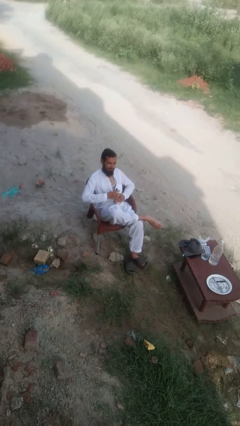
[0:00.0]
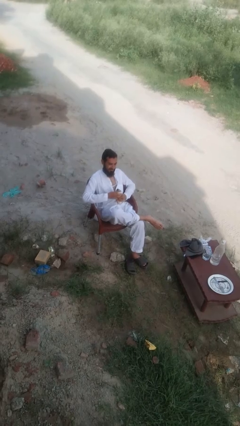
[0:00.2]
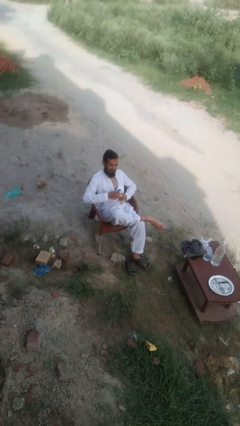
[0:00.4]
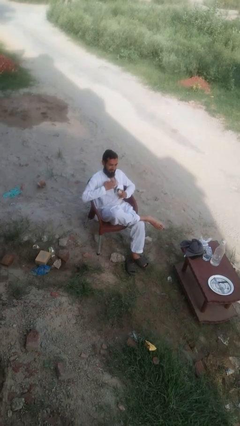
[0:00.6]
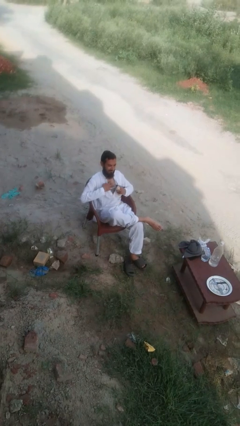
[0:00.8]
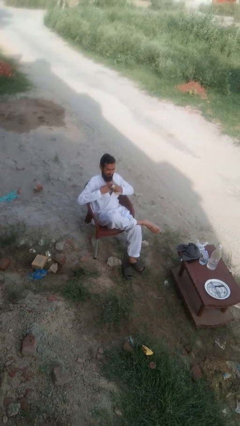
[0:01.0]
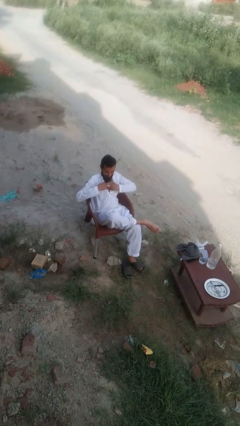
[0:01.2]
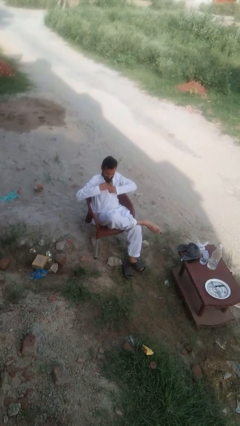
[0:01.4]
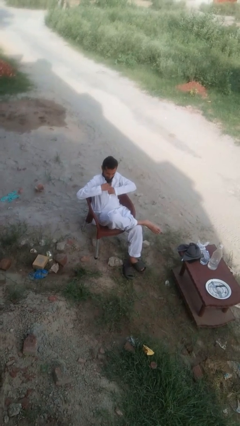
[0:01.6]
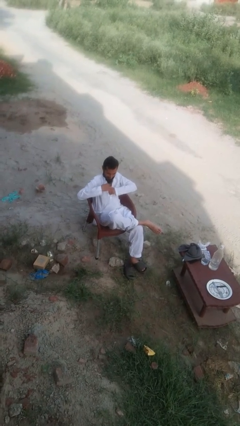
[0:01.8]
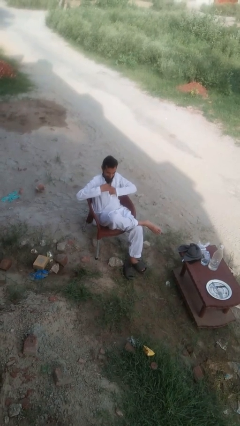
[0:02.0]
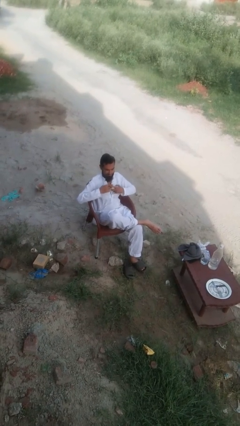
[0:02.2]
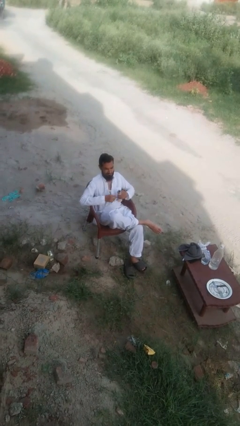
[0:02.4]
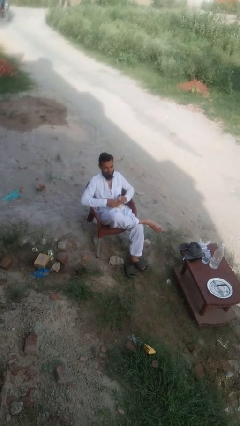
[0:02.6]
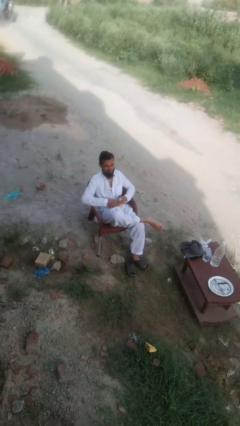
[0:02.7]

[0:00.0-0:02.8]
person applies deodorant

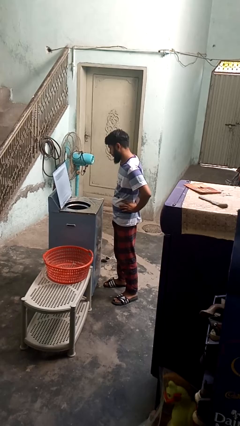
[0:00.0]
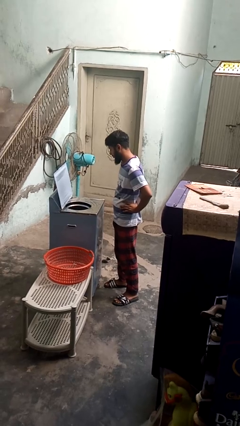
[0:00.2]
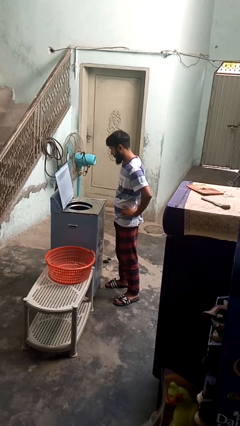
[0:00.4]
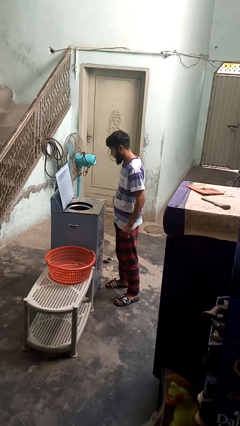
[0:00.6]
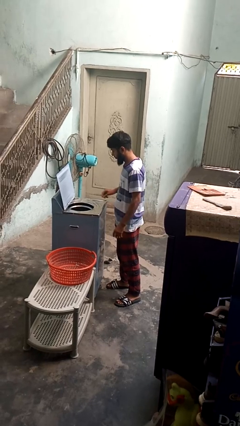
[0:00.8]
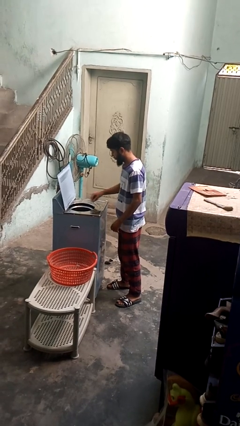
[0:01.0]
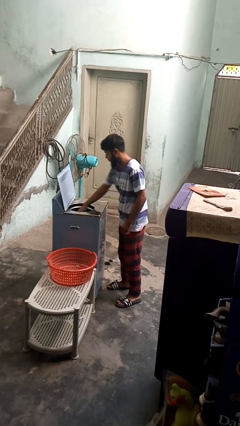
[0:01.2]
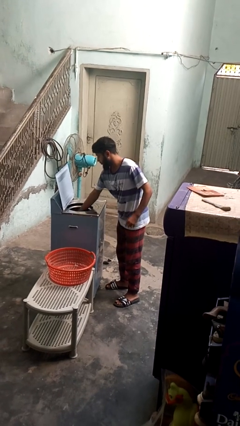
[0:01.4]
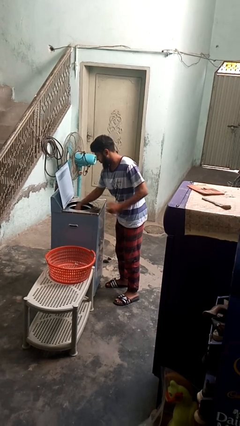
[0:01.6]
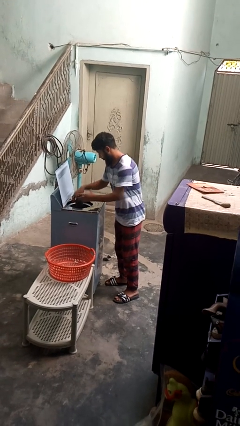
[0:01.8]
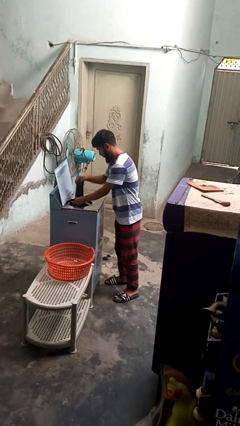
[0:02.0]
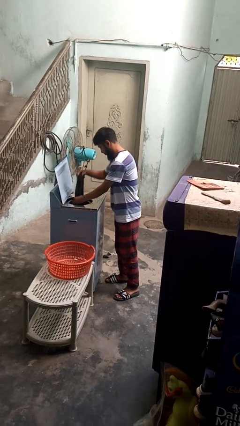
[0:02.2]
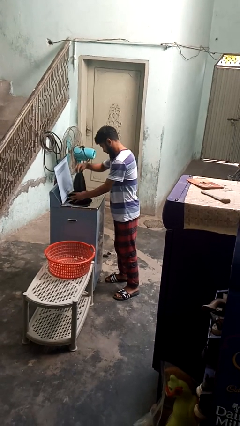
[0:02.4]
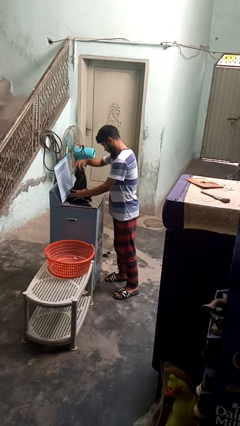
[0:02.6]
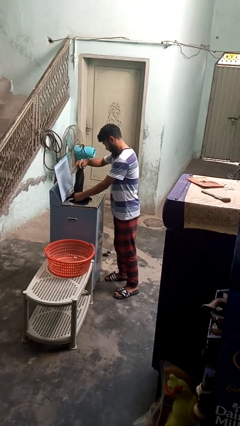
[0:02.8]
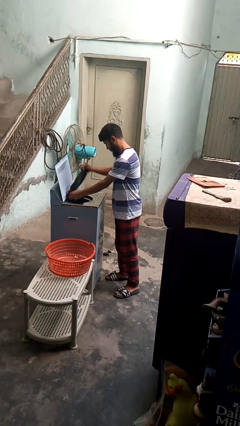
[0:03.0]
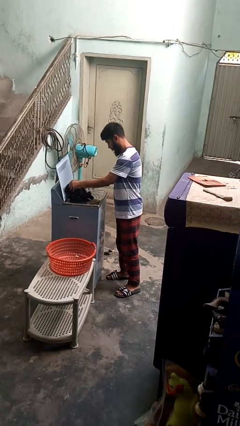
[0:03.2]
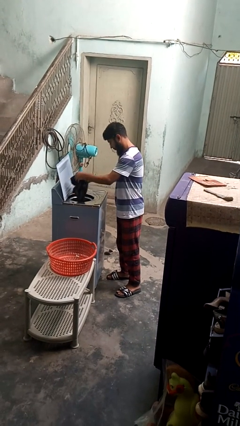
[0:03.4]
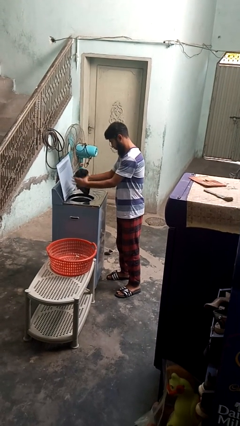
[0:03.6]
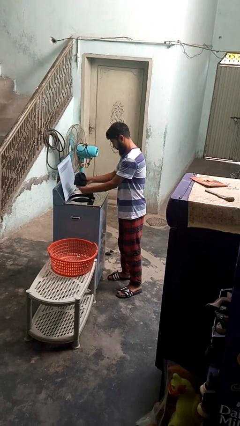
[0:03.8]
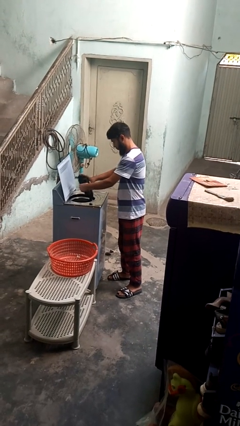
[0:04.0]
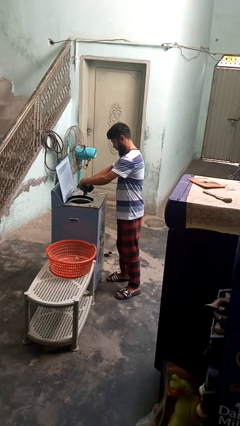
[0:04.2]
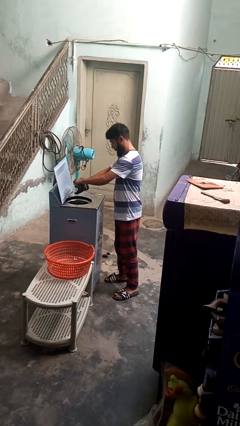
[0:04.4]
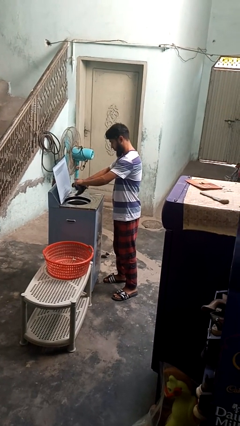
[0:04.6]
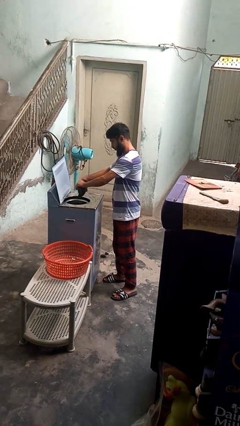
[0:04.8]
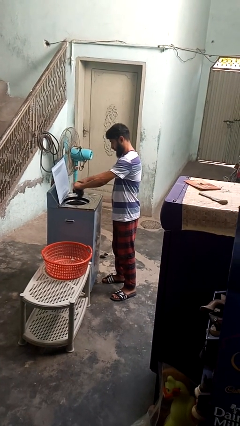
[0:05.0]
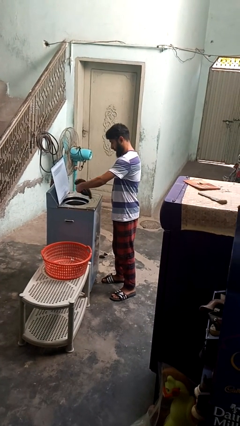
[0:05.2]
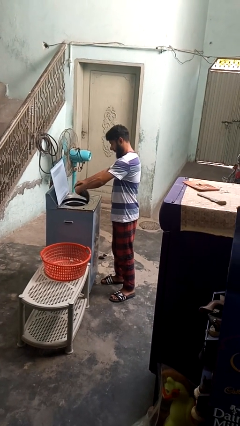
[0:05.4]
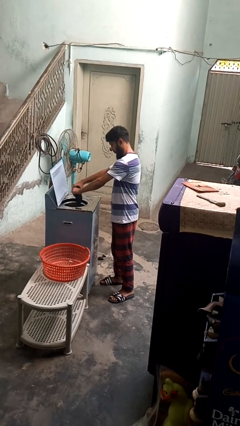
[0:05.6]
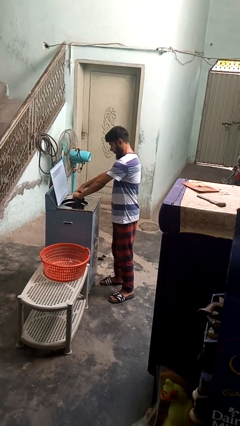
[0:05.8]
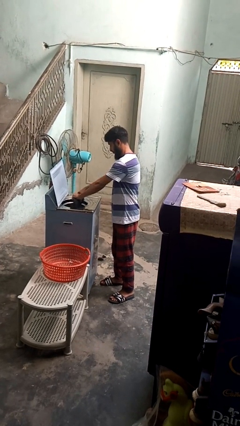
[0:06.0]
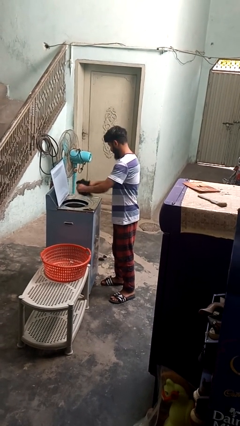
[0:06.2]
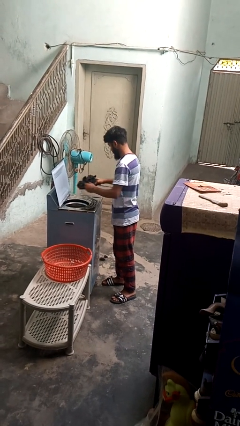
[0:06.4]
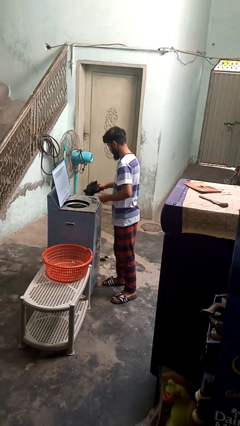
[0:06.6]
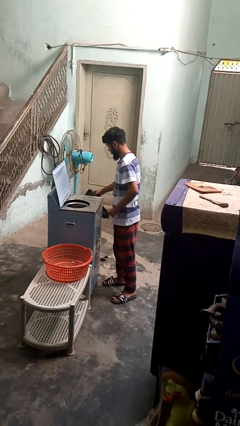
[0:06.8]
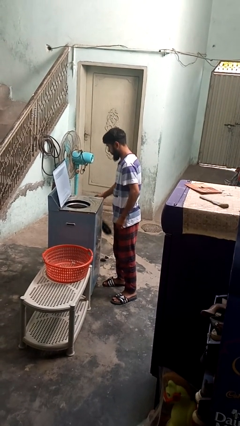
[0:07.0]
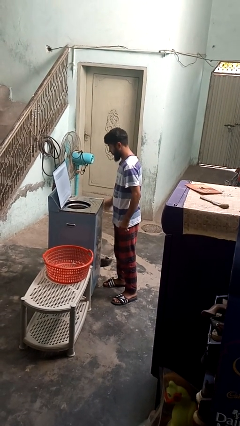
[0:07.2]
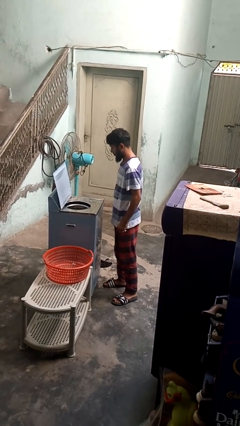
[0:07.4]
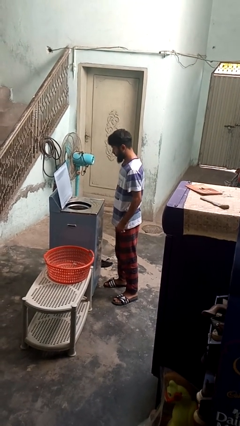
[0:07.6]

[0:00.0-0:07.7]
person unloads clotheswasher

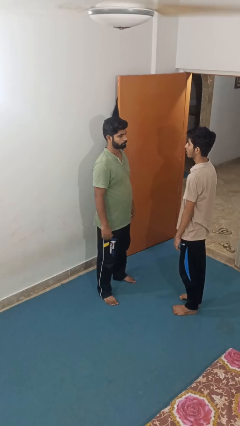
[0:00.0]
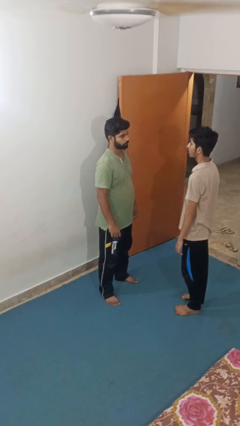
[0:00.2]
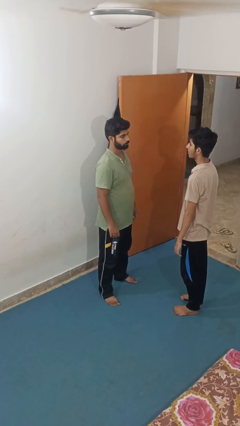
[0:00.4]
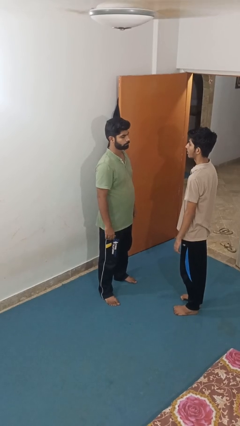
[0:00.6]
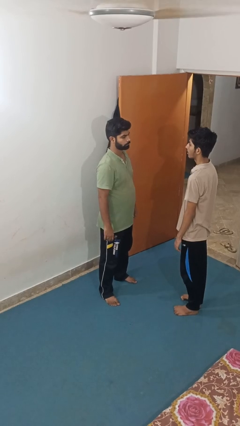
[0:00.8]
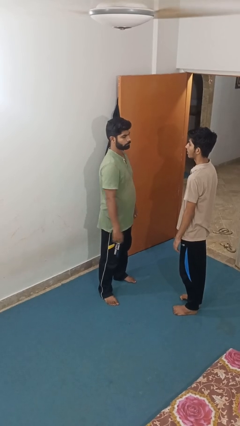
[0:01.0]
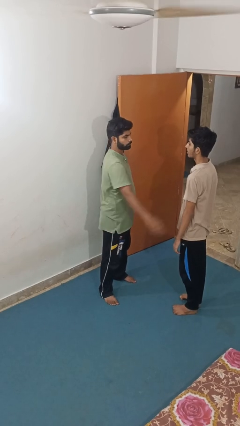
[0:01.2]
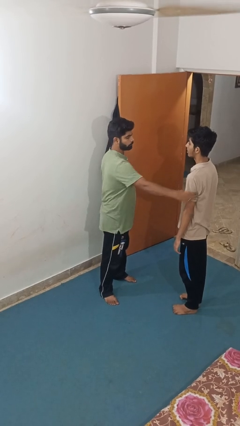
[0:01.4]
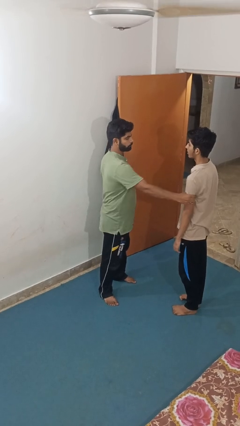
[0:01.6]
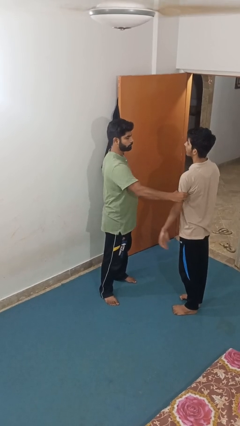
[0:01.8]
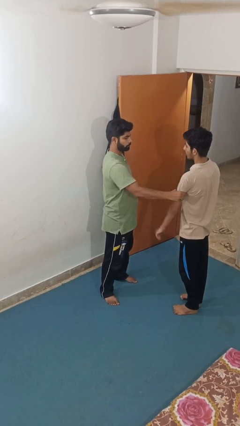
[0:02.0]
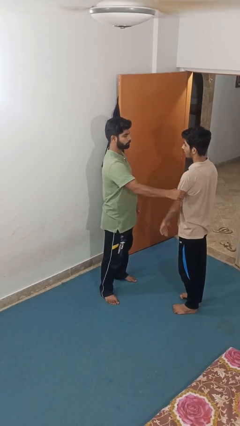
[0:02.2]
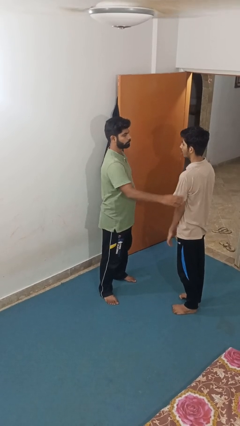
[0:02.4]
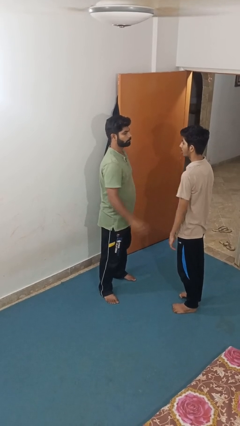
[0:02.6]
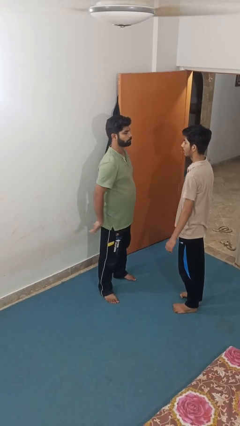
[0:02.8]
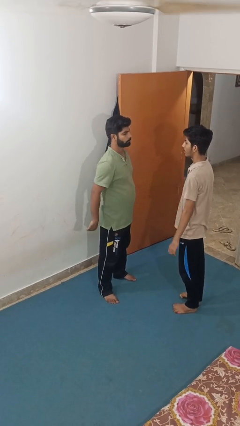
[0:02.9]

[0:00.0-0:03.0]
person grabs person by bicep

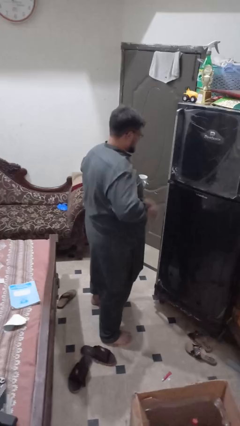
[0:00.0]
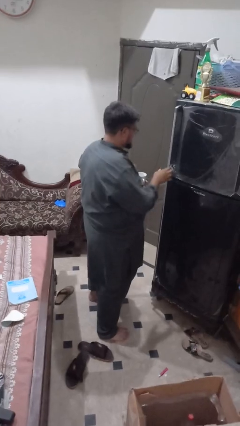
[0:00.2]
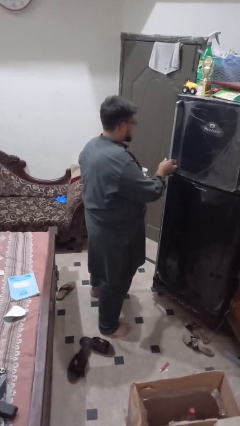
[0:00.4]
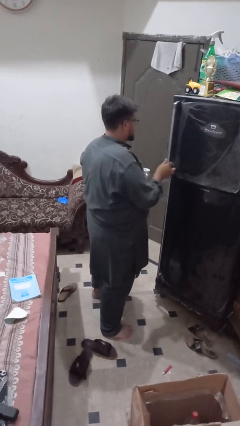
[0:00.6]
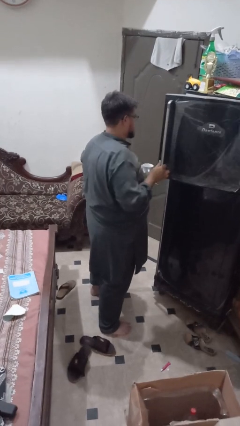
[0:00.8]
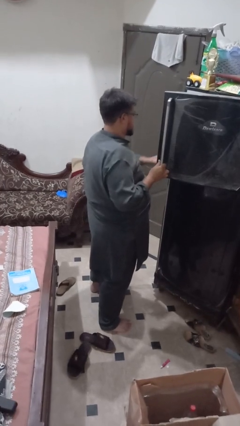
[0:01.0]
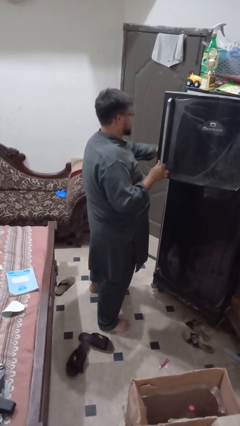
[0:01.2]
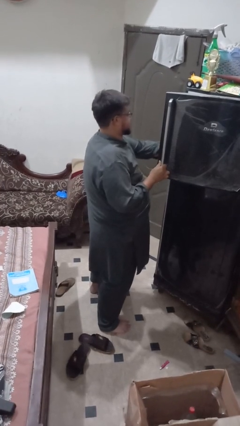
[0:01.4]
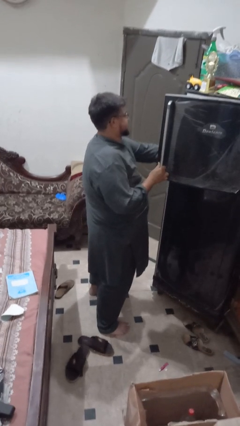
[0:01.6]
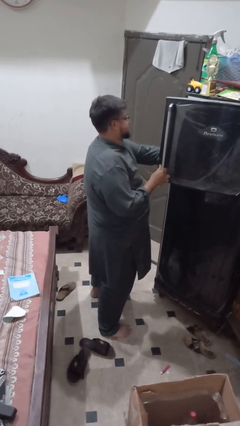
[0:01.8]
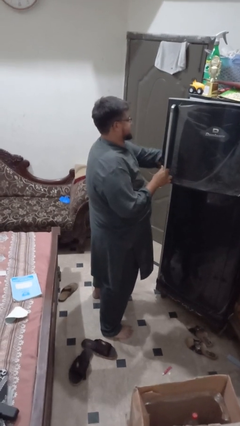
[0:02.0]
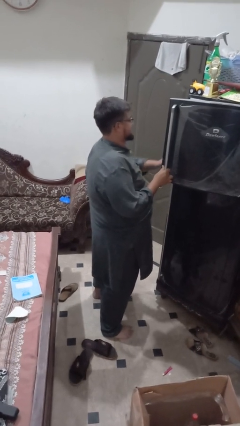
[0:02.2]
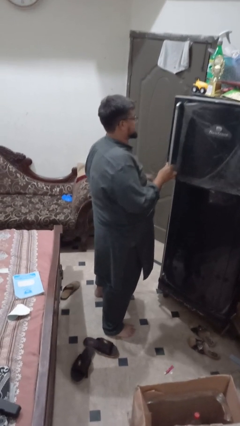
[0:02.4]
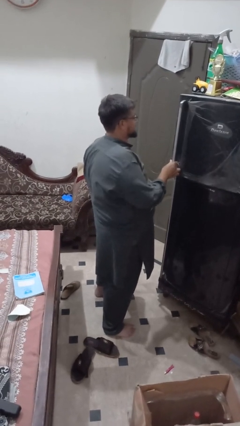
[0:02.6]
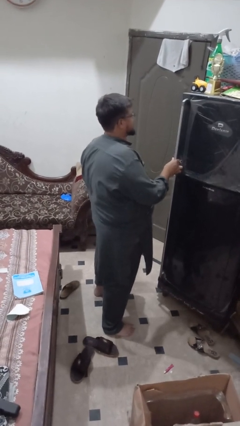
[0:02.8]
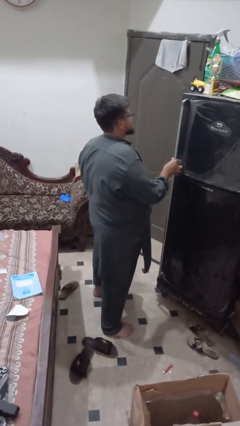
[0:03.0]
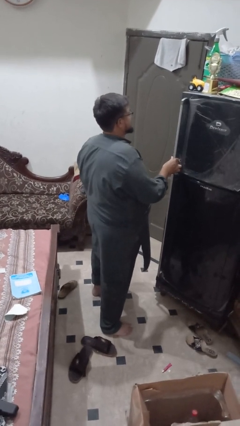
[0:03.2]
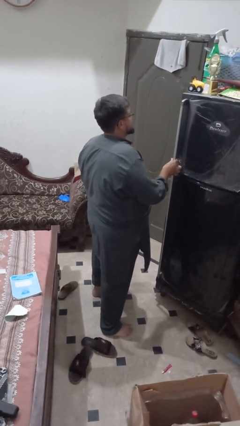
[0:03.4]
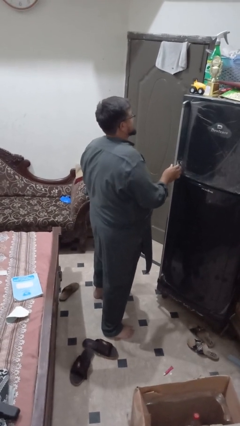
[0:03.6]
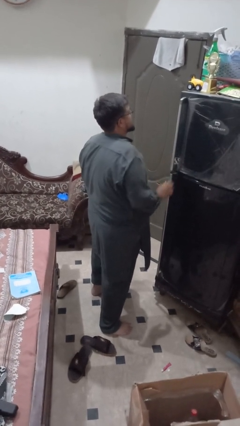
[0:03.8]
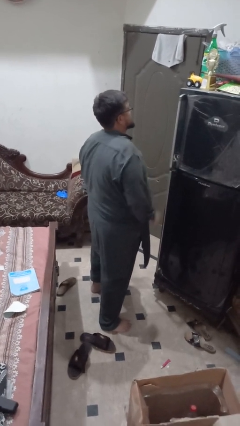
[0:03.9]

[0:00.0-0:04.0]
person puts object into refrigerator

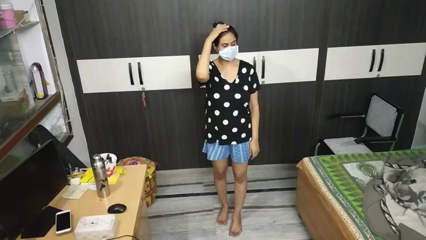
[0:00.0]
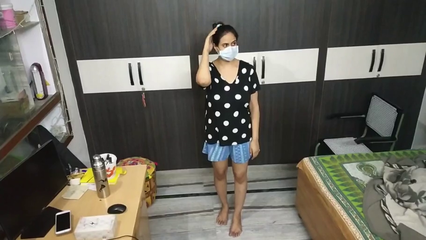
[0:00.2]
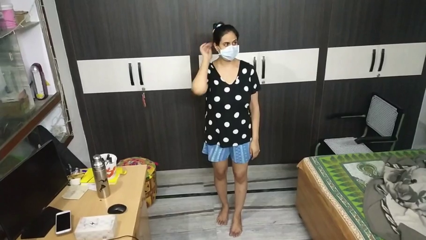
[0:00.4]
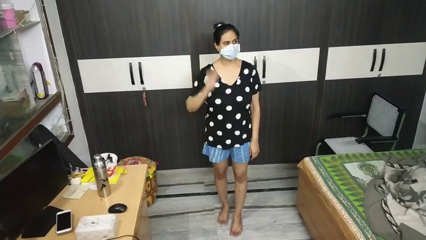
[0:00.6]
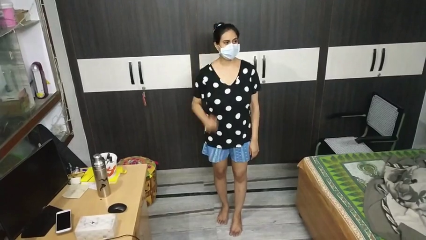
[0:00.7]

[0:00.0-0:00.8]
person pats head
